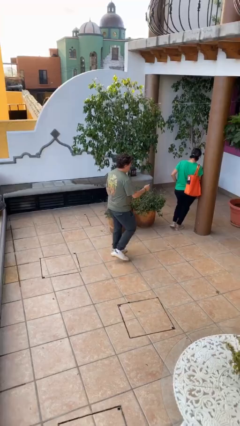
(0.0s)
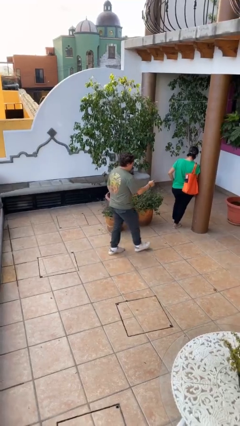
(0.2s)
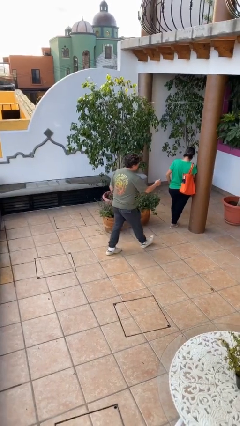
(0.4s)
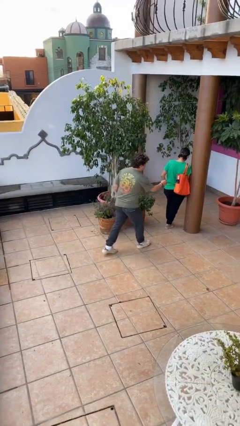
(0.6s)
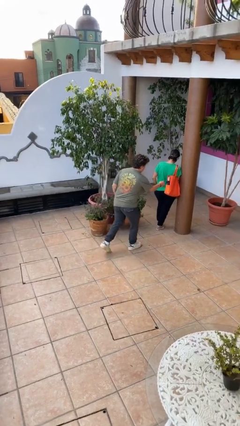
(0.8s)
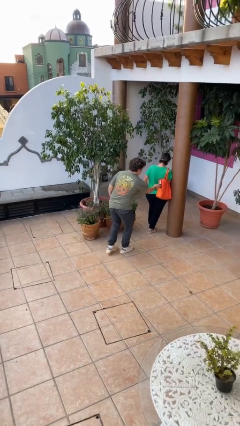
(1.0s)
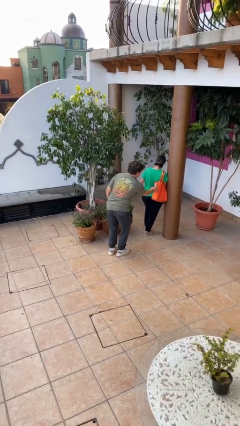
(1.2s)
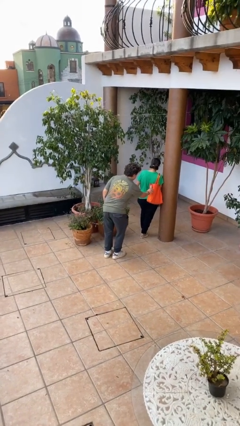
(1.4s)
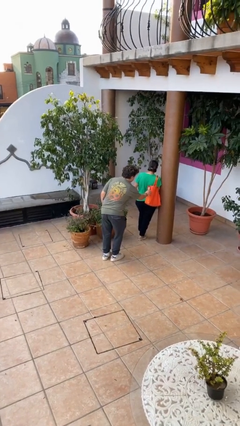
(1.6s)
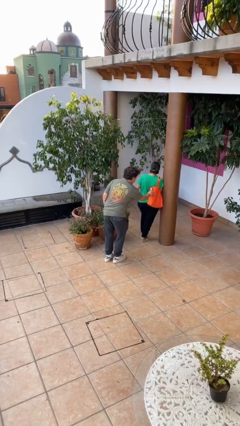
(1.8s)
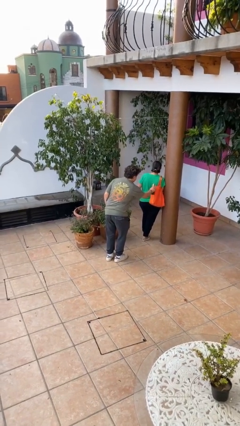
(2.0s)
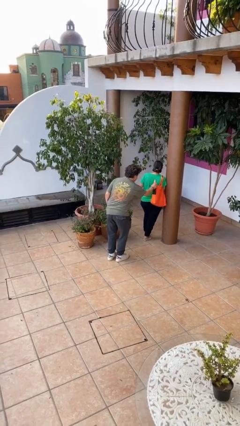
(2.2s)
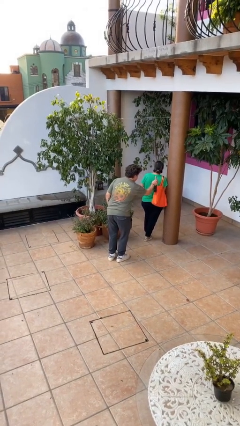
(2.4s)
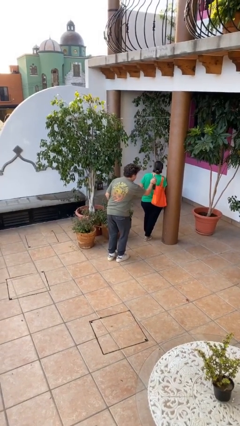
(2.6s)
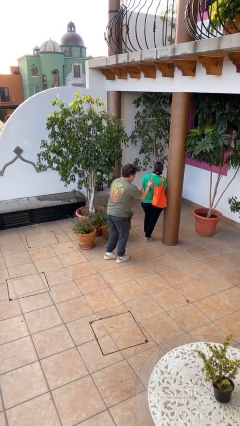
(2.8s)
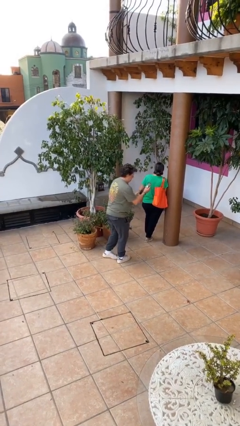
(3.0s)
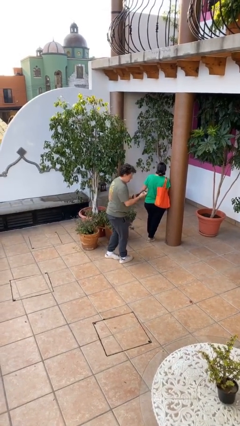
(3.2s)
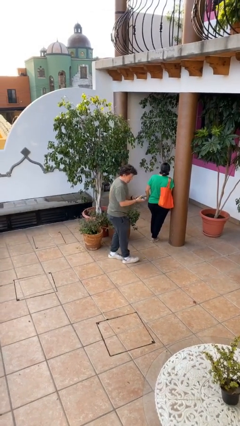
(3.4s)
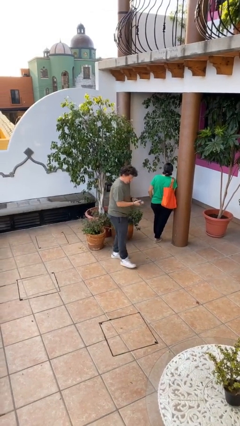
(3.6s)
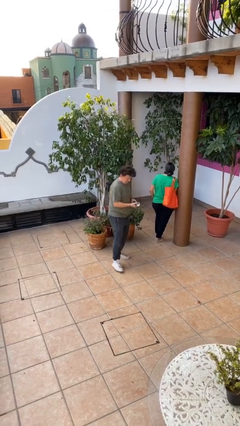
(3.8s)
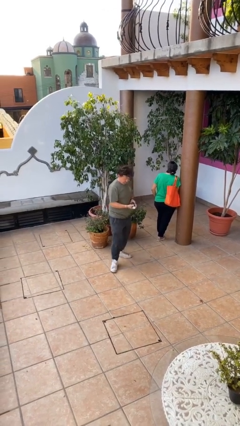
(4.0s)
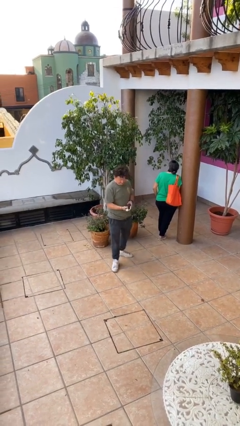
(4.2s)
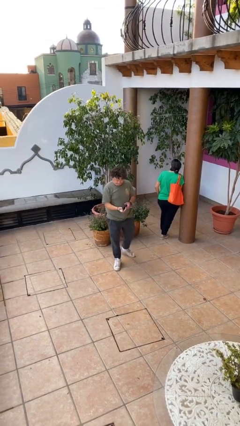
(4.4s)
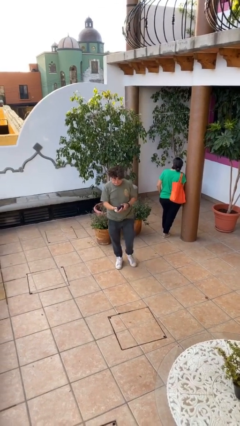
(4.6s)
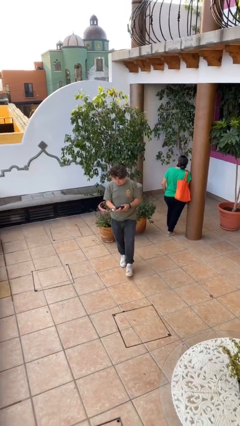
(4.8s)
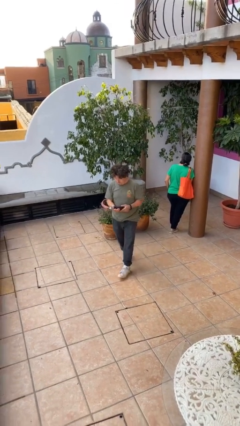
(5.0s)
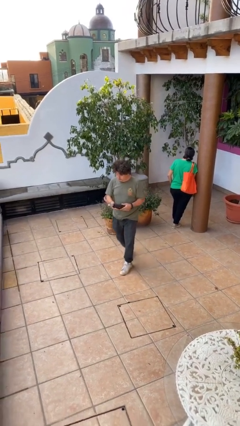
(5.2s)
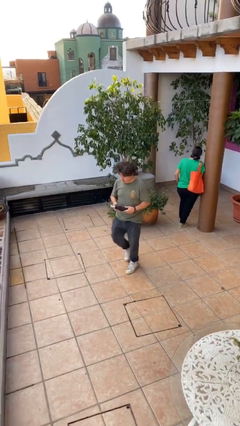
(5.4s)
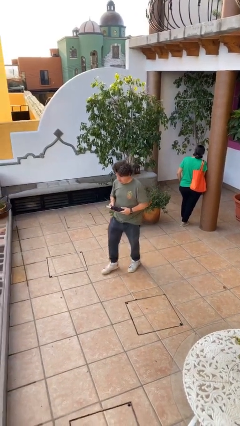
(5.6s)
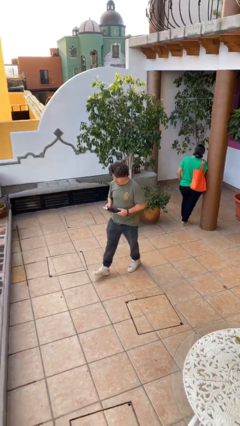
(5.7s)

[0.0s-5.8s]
person steals object from person

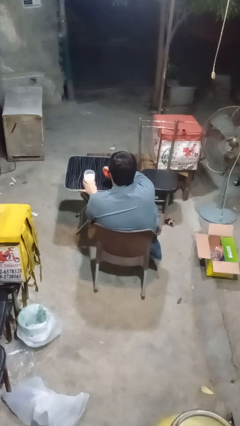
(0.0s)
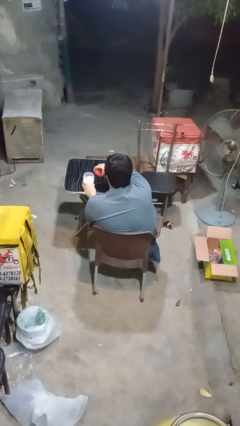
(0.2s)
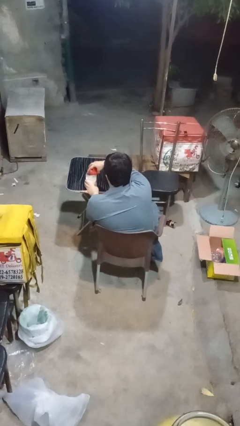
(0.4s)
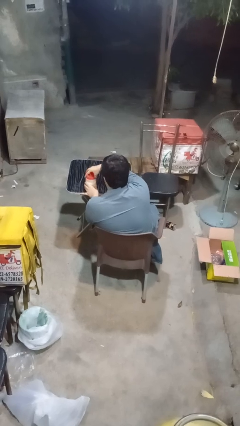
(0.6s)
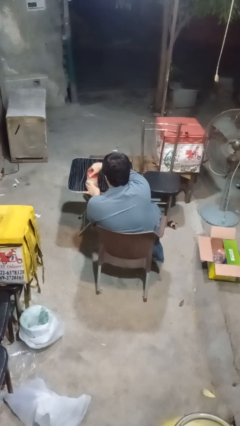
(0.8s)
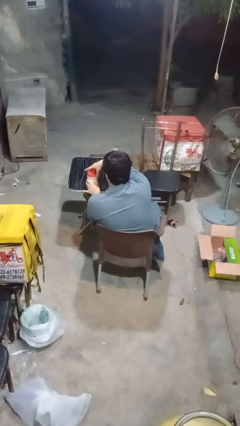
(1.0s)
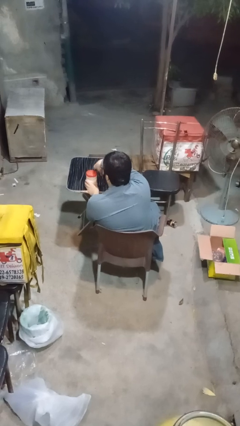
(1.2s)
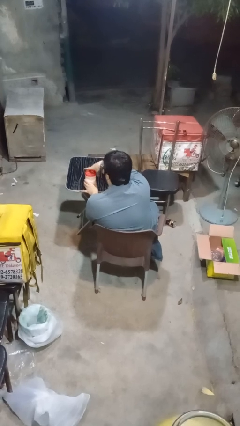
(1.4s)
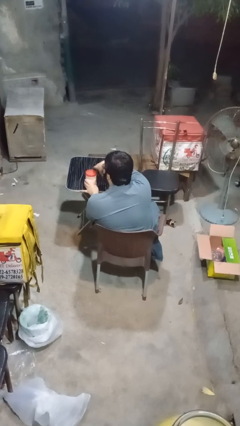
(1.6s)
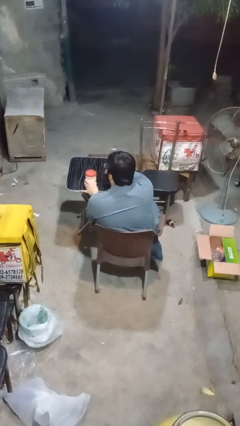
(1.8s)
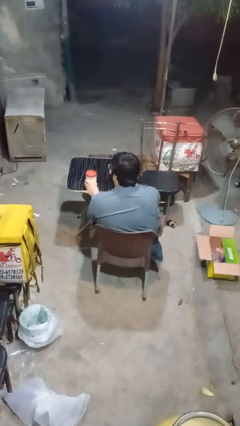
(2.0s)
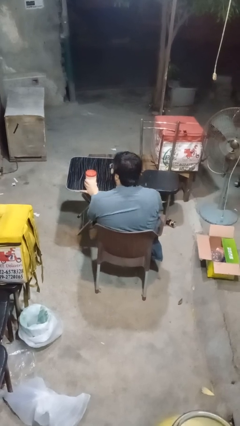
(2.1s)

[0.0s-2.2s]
person closes jar

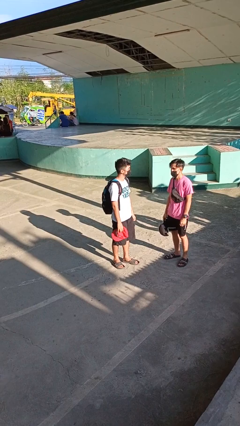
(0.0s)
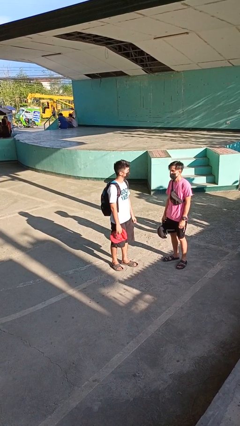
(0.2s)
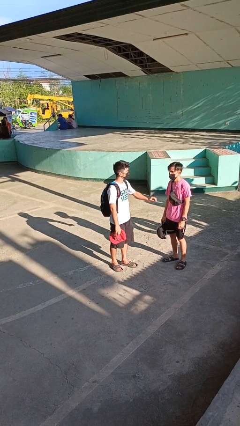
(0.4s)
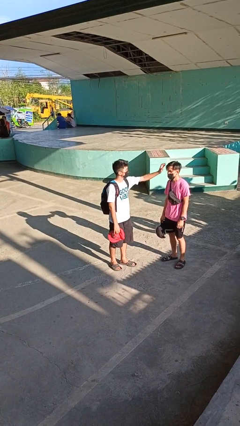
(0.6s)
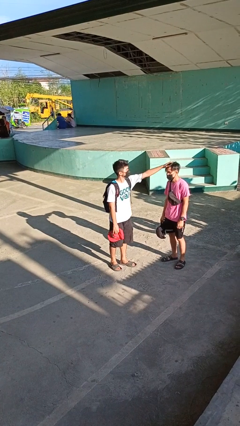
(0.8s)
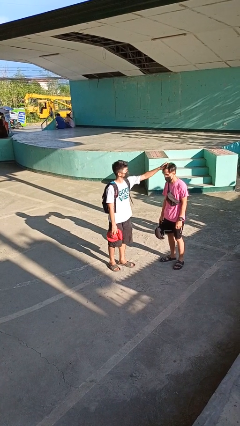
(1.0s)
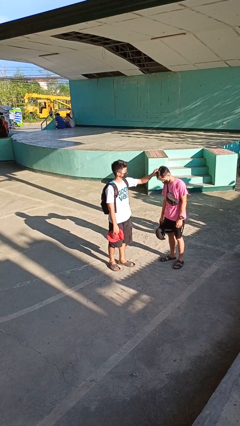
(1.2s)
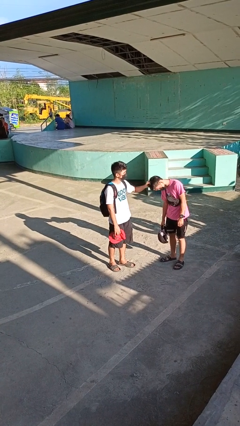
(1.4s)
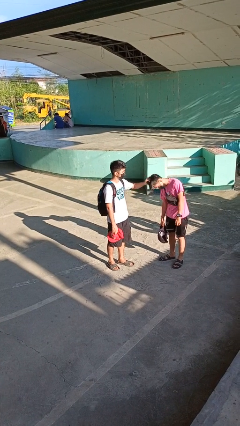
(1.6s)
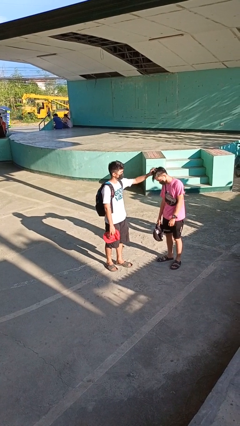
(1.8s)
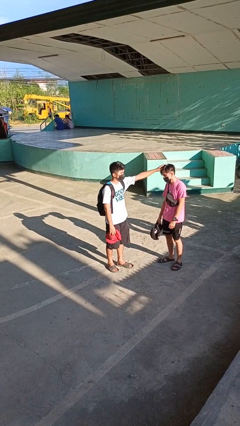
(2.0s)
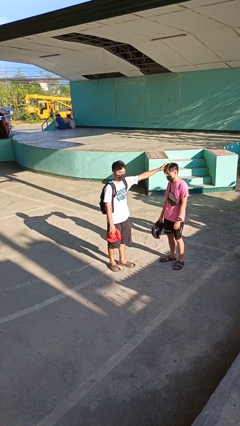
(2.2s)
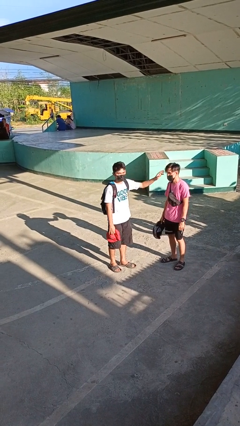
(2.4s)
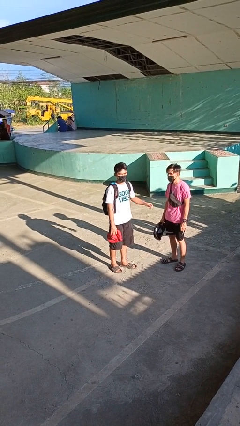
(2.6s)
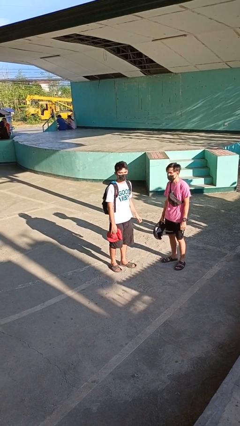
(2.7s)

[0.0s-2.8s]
person grabs person by hair

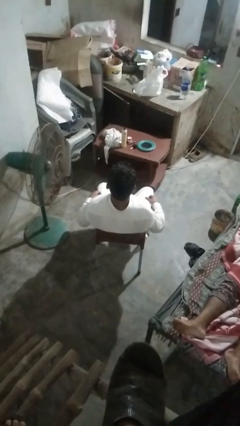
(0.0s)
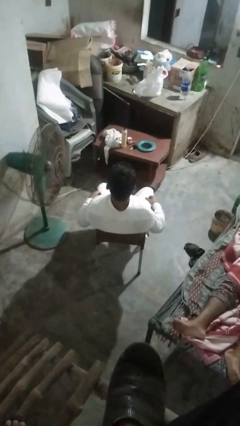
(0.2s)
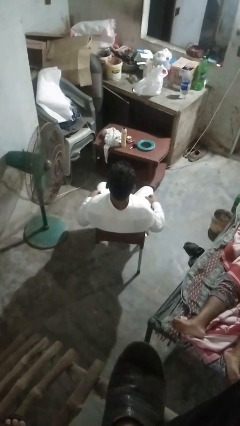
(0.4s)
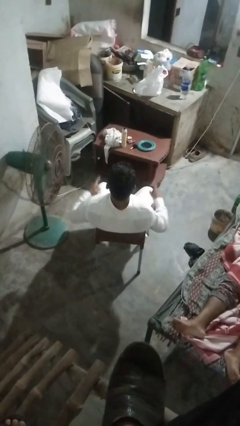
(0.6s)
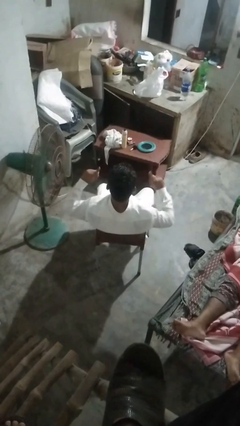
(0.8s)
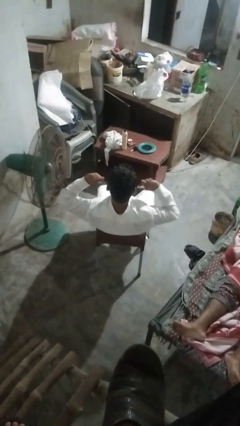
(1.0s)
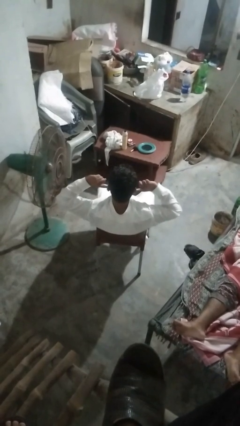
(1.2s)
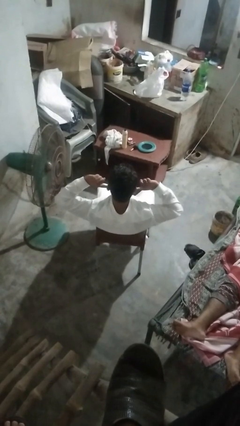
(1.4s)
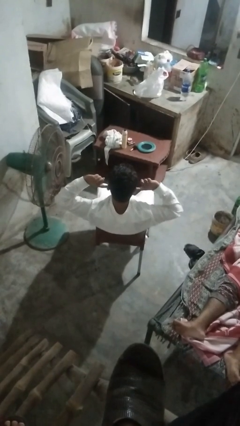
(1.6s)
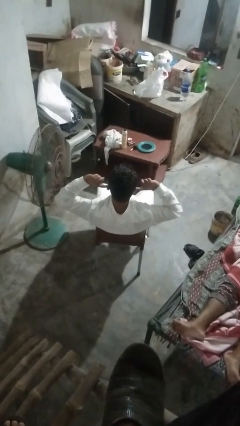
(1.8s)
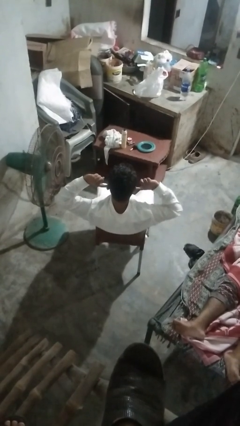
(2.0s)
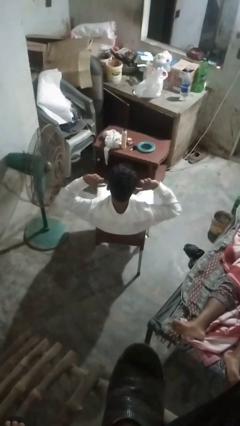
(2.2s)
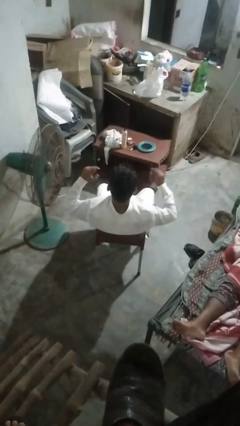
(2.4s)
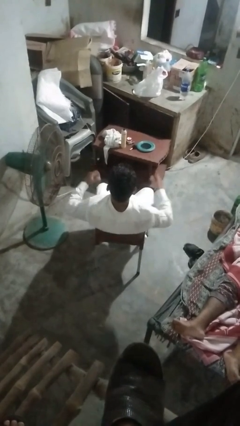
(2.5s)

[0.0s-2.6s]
person puts fingers in ear

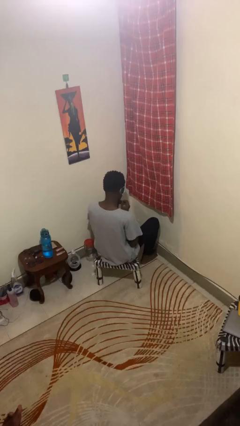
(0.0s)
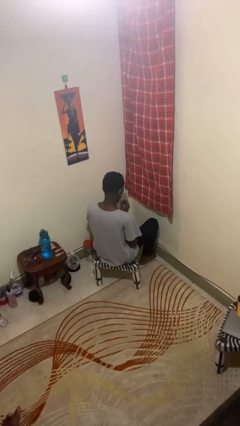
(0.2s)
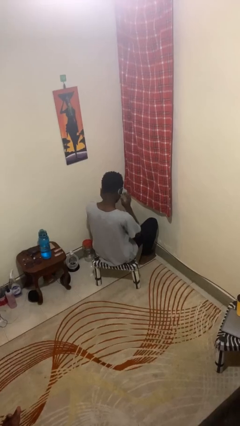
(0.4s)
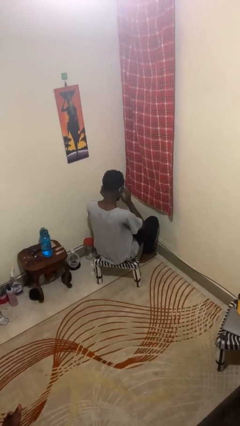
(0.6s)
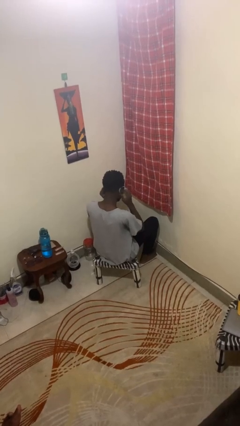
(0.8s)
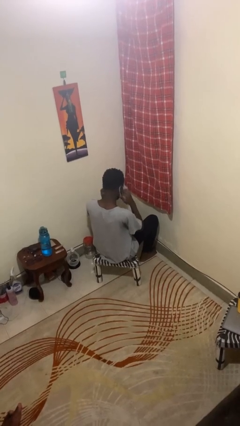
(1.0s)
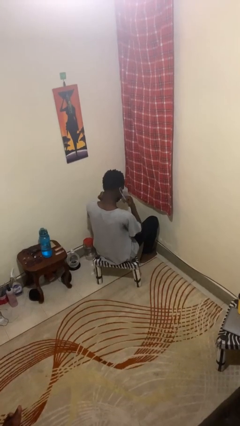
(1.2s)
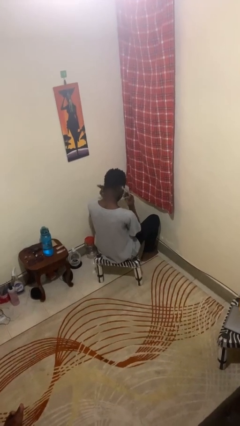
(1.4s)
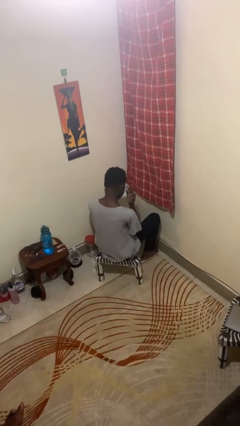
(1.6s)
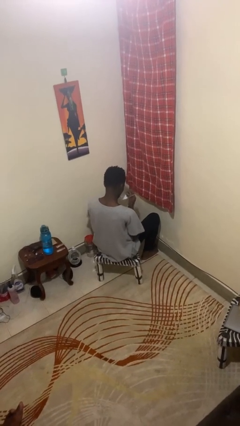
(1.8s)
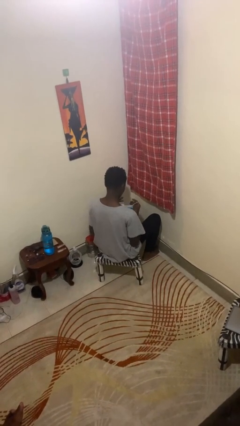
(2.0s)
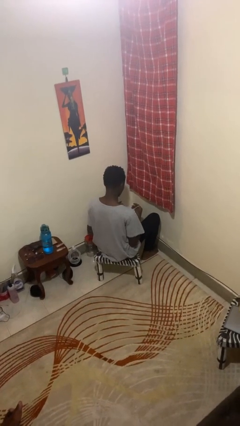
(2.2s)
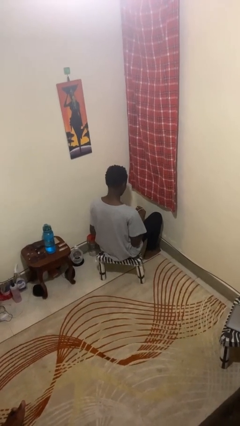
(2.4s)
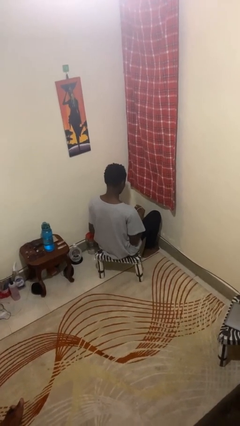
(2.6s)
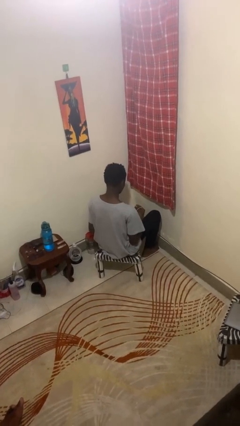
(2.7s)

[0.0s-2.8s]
person takes off facemask

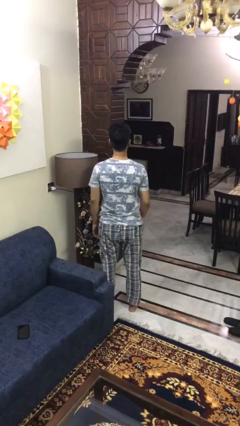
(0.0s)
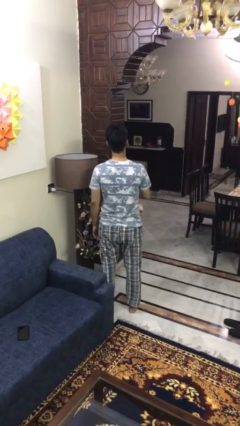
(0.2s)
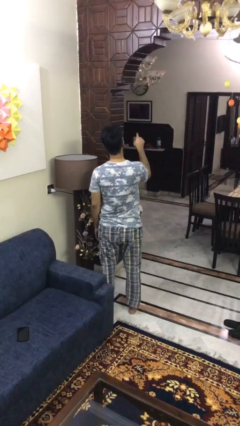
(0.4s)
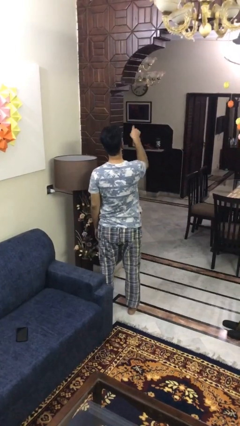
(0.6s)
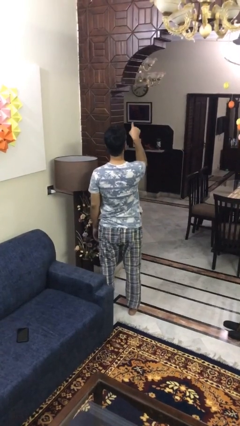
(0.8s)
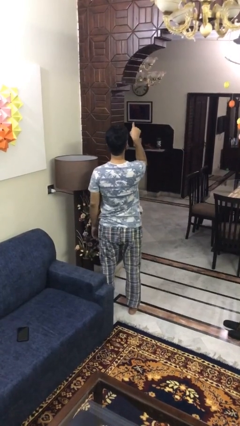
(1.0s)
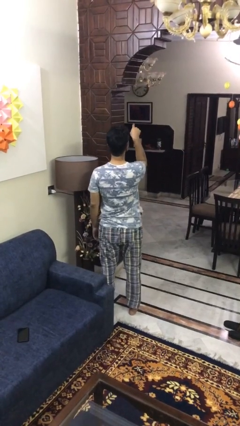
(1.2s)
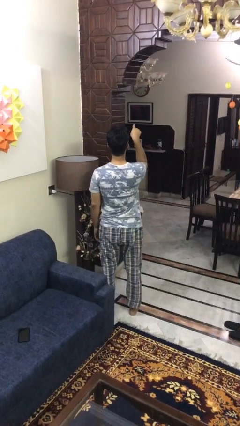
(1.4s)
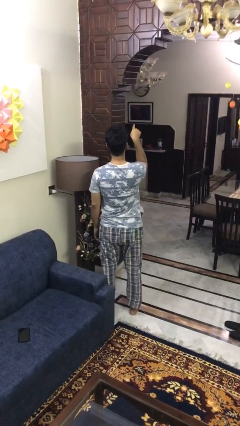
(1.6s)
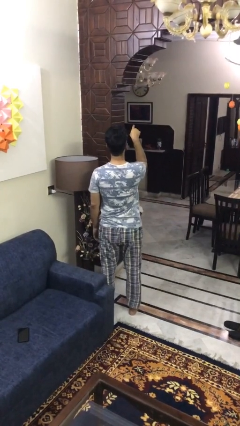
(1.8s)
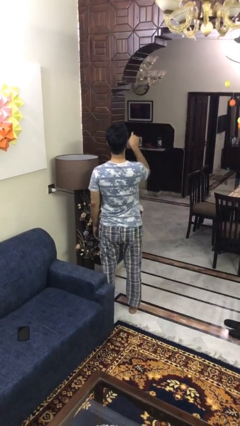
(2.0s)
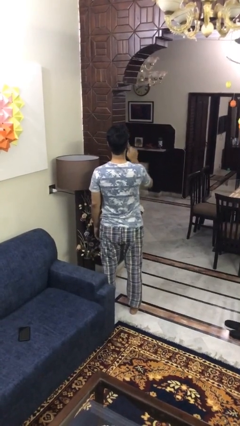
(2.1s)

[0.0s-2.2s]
person points at person
